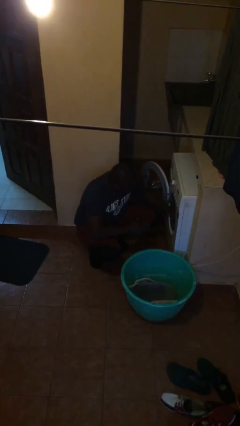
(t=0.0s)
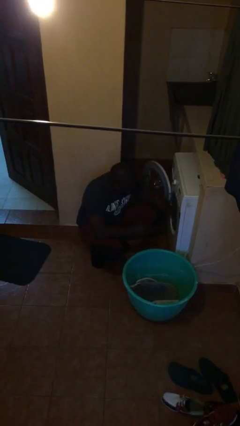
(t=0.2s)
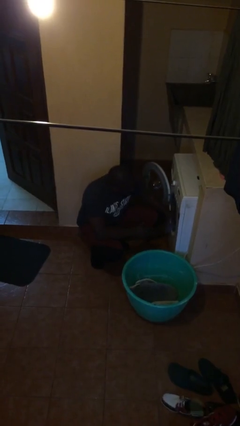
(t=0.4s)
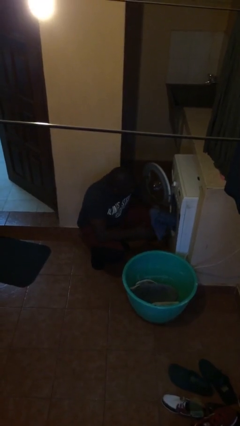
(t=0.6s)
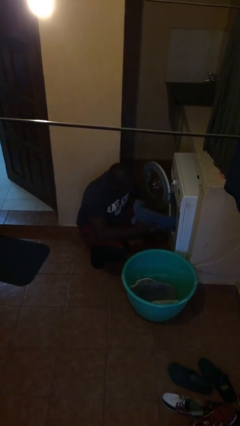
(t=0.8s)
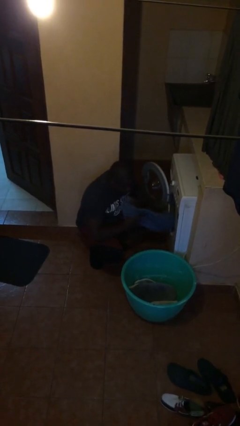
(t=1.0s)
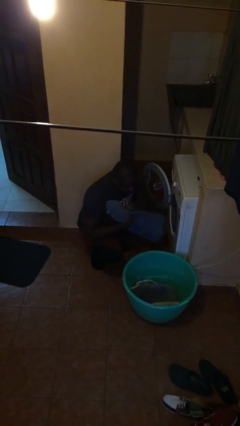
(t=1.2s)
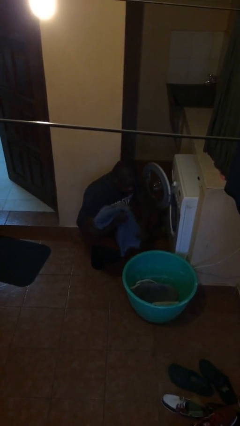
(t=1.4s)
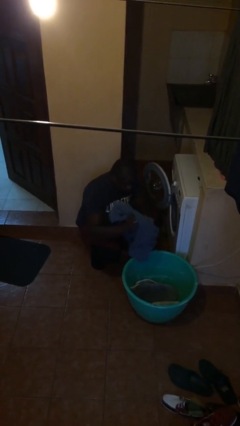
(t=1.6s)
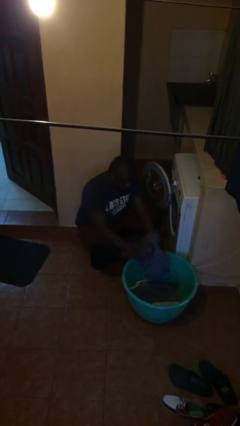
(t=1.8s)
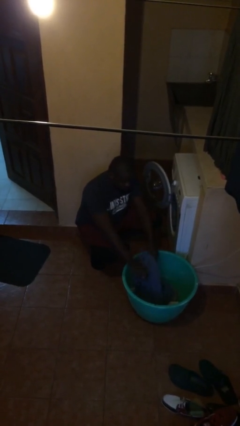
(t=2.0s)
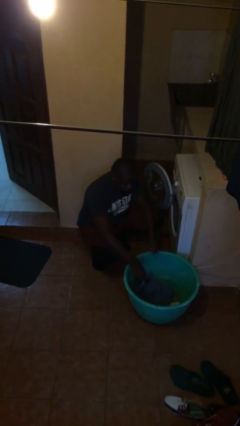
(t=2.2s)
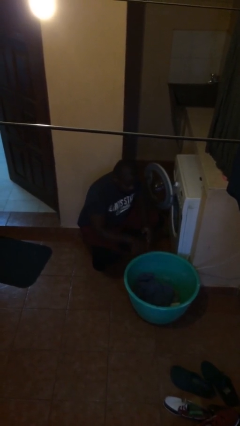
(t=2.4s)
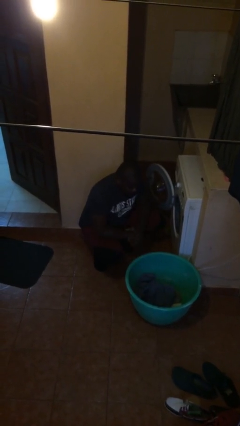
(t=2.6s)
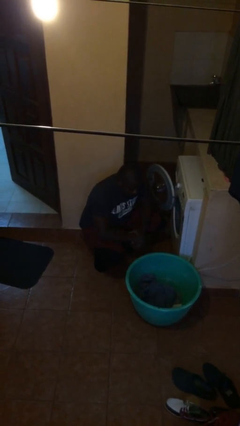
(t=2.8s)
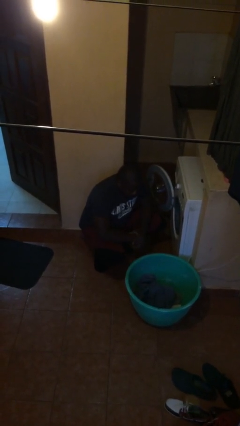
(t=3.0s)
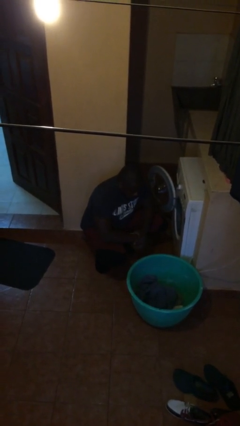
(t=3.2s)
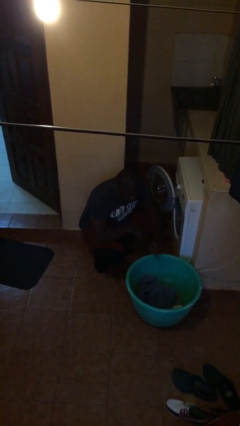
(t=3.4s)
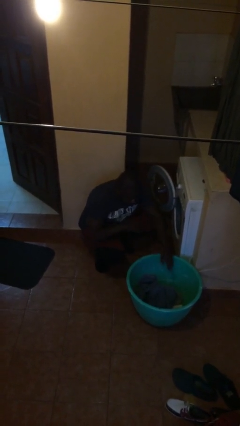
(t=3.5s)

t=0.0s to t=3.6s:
person unloads clotheswasher

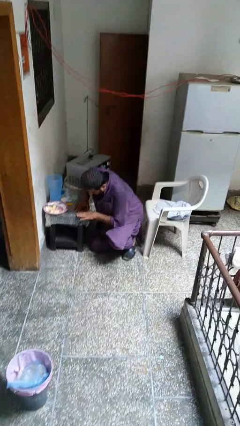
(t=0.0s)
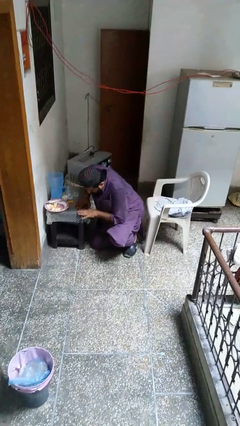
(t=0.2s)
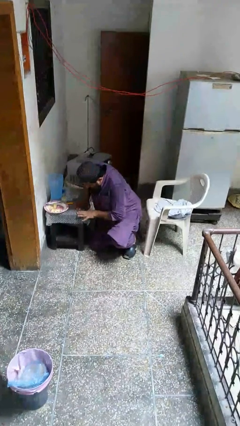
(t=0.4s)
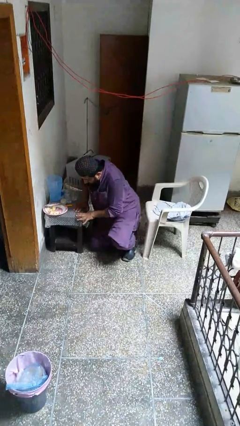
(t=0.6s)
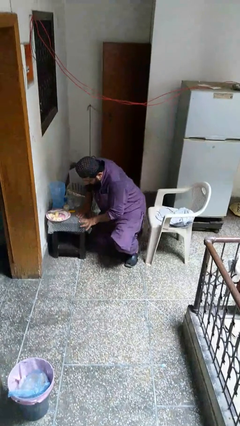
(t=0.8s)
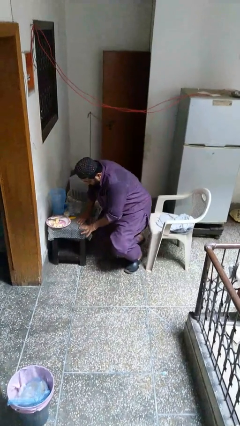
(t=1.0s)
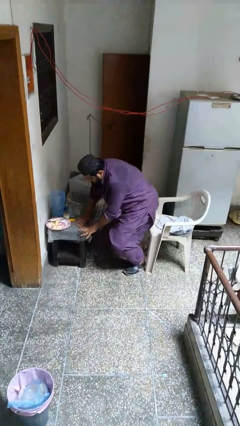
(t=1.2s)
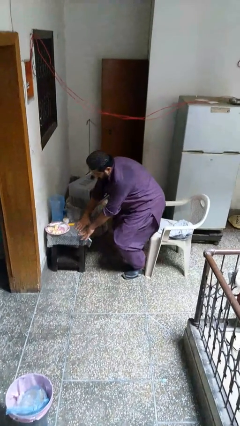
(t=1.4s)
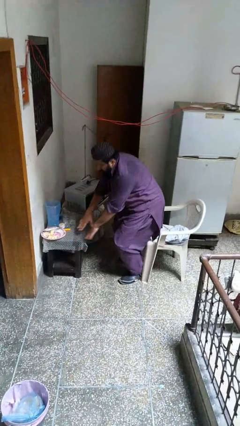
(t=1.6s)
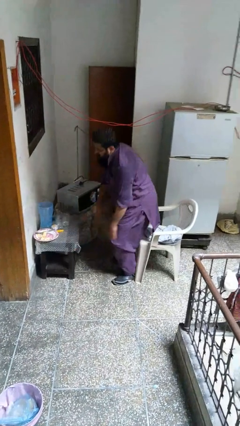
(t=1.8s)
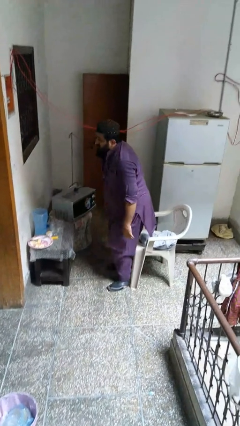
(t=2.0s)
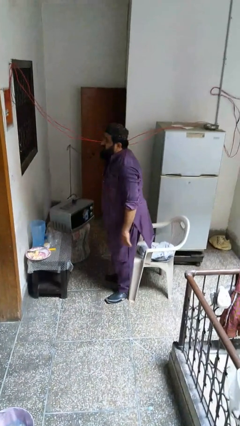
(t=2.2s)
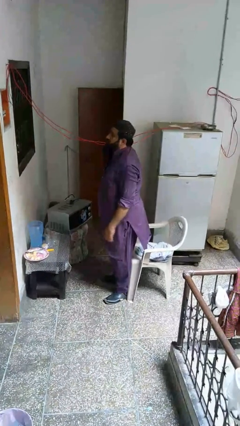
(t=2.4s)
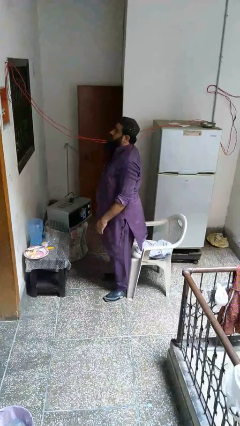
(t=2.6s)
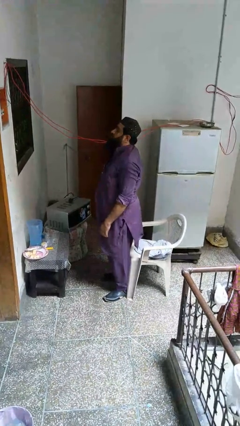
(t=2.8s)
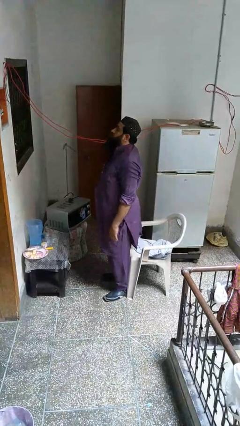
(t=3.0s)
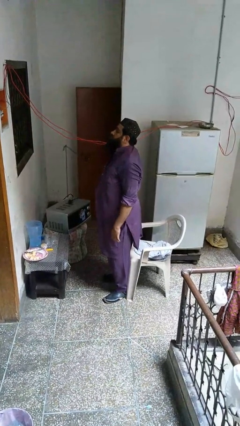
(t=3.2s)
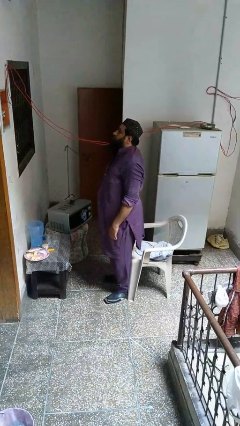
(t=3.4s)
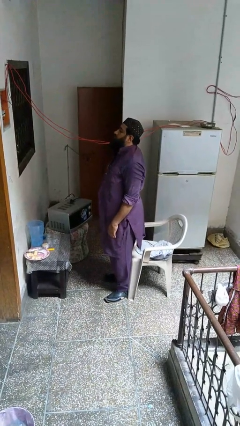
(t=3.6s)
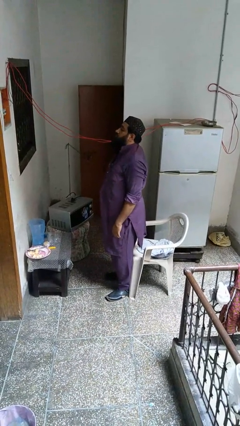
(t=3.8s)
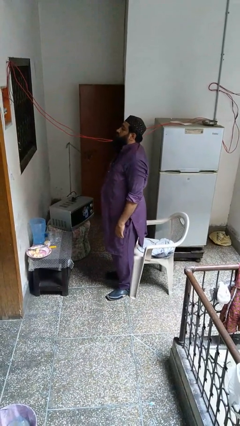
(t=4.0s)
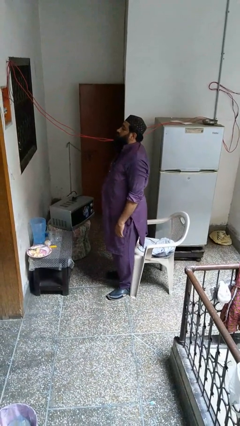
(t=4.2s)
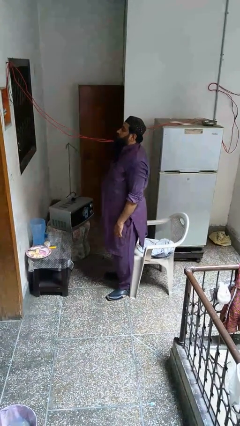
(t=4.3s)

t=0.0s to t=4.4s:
person stands up from floor

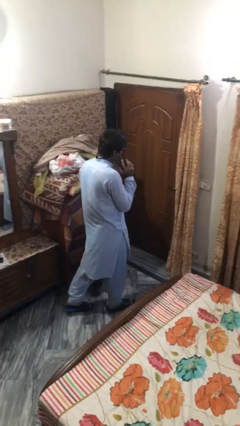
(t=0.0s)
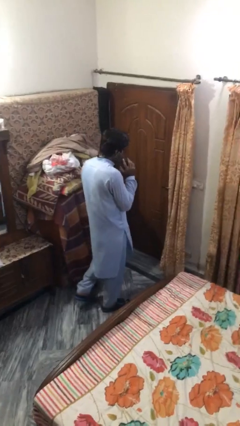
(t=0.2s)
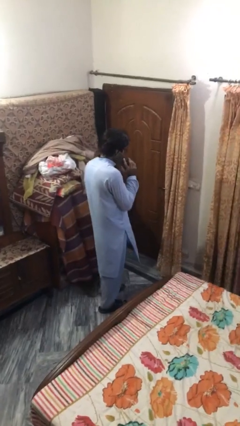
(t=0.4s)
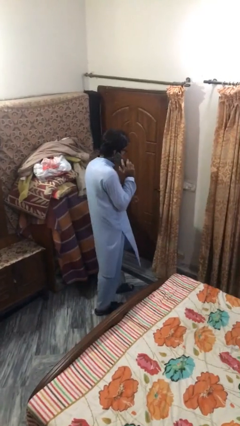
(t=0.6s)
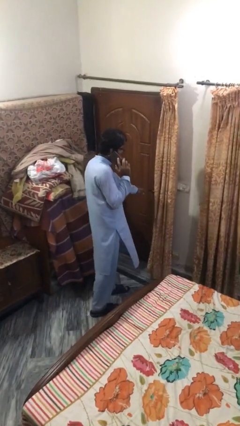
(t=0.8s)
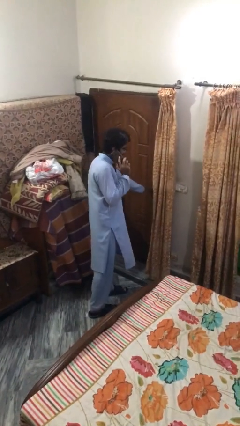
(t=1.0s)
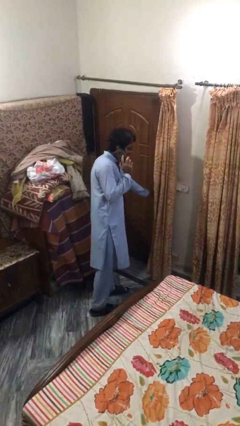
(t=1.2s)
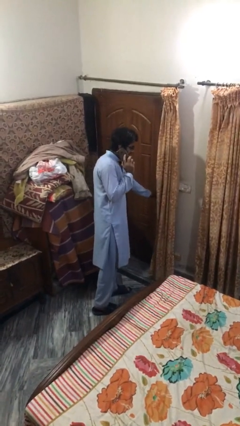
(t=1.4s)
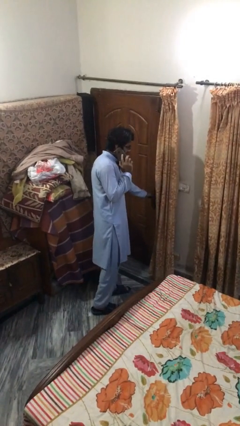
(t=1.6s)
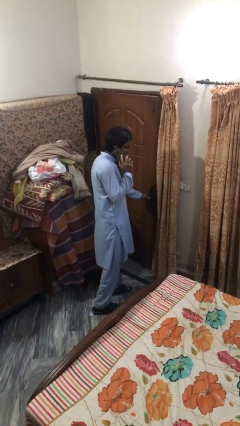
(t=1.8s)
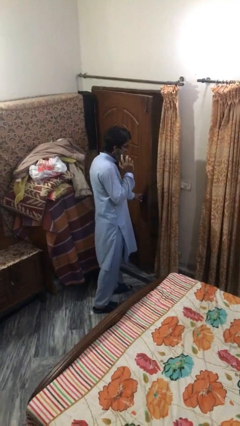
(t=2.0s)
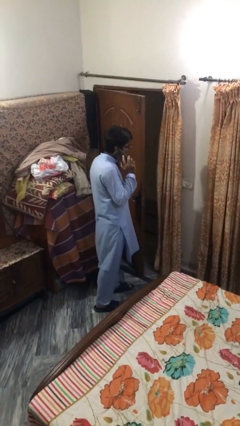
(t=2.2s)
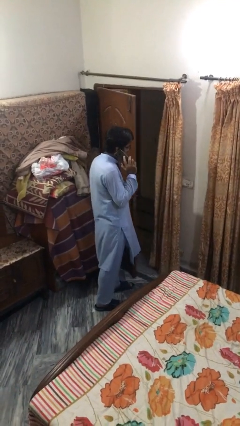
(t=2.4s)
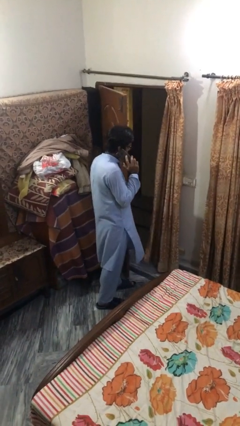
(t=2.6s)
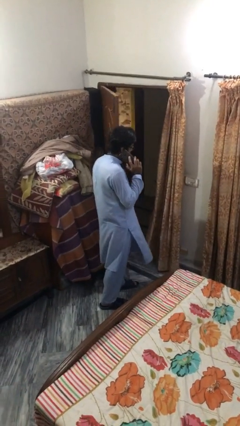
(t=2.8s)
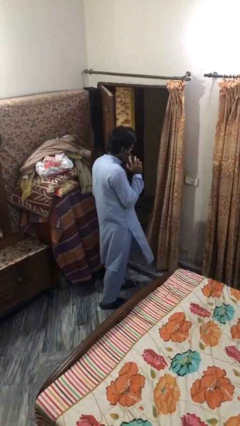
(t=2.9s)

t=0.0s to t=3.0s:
person opens facility door

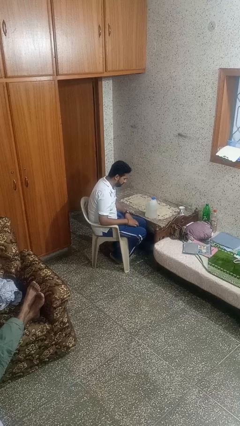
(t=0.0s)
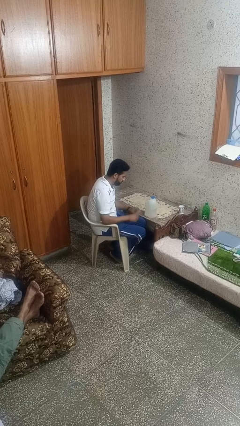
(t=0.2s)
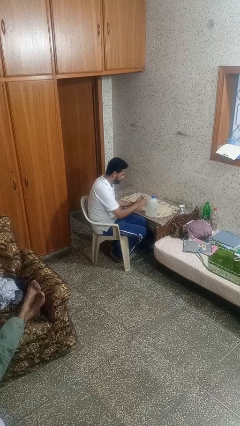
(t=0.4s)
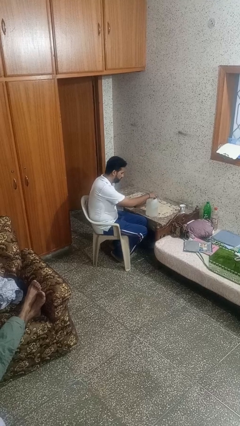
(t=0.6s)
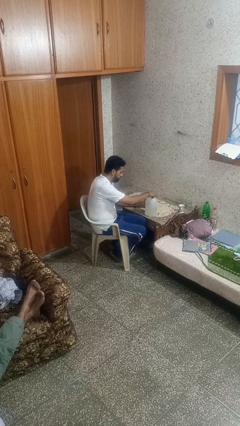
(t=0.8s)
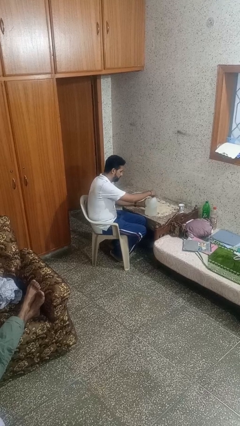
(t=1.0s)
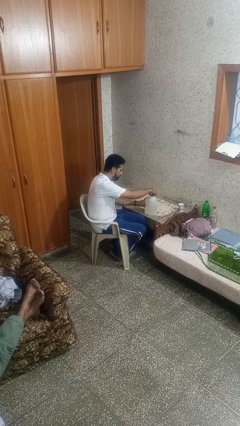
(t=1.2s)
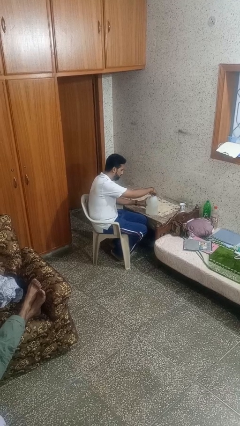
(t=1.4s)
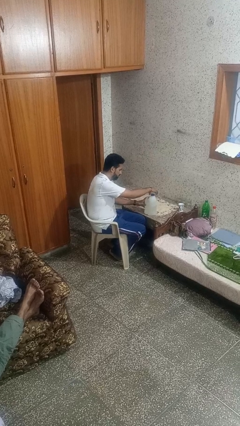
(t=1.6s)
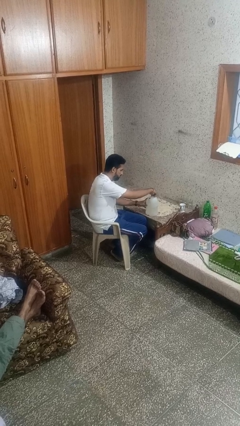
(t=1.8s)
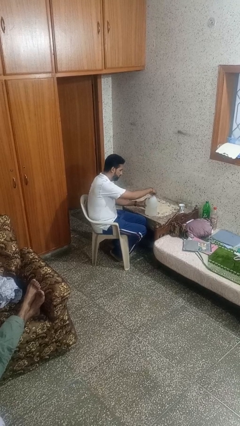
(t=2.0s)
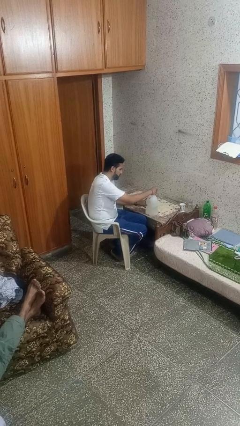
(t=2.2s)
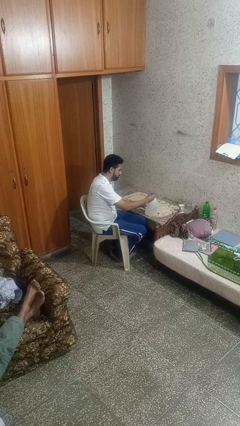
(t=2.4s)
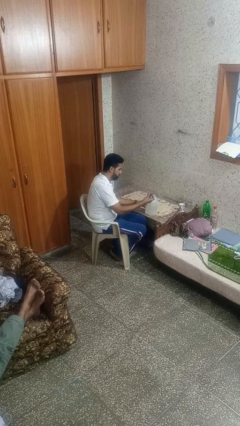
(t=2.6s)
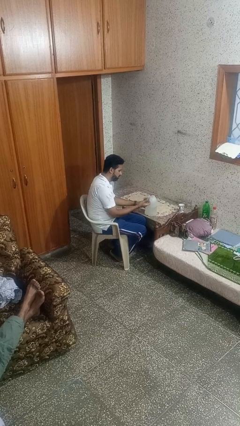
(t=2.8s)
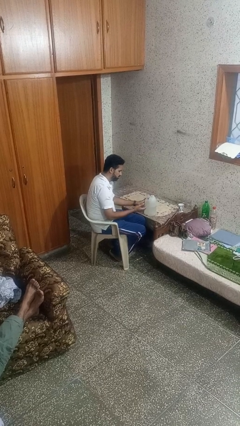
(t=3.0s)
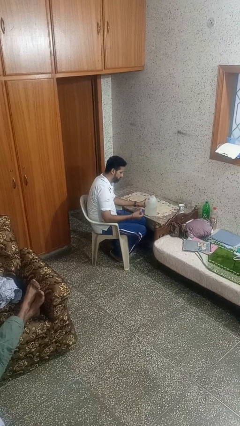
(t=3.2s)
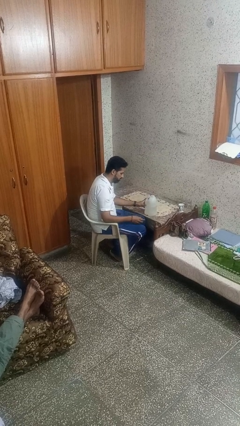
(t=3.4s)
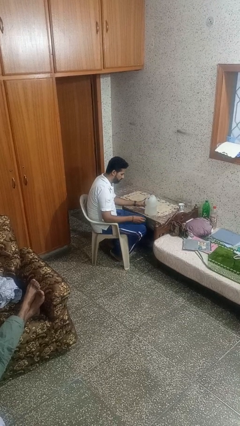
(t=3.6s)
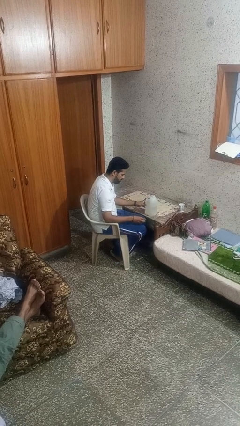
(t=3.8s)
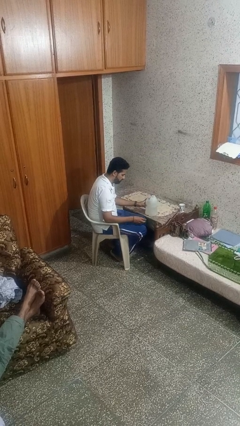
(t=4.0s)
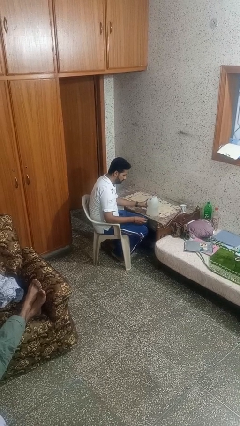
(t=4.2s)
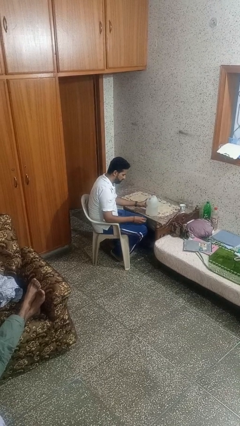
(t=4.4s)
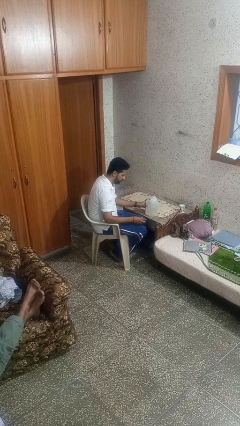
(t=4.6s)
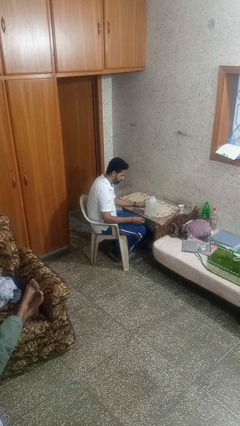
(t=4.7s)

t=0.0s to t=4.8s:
person unscrews lid from bottle

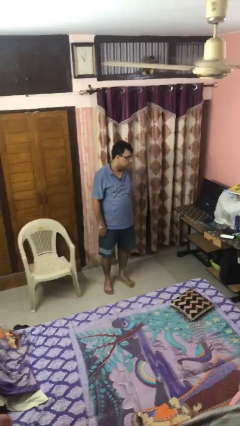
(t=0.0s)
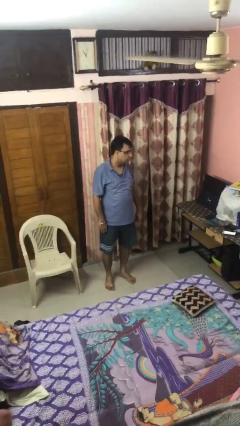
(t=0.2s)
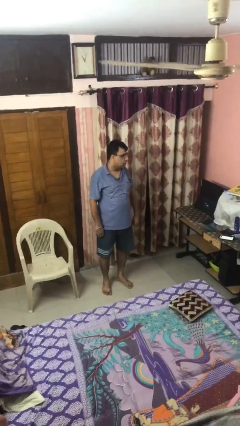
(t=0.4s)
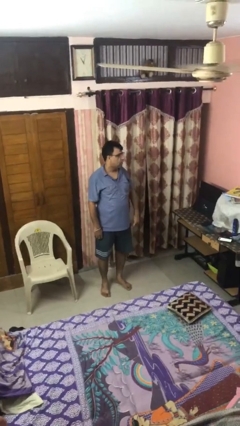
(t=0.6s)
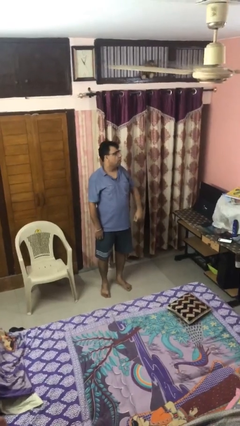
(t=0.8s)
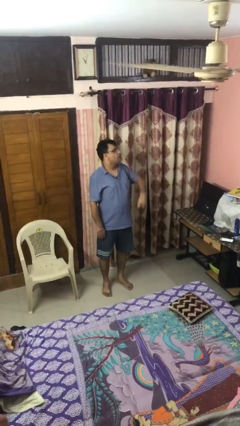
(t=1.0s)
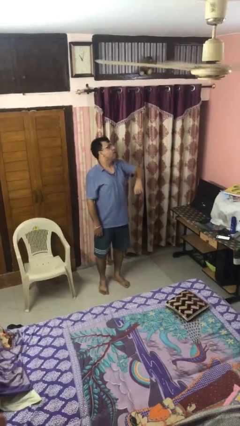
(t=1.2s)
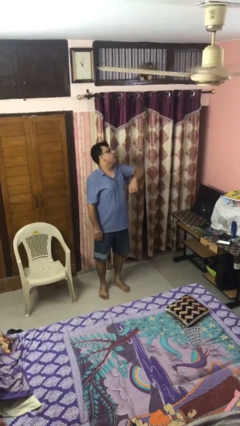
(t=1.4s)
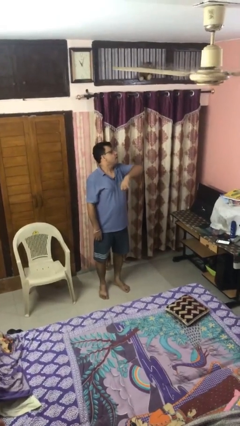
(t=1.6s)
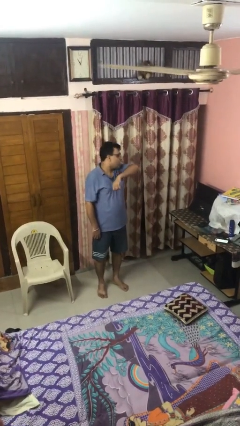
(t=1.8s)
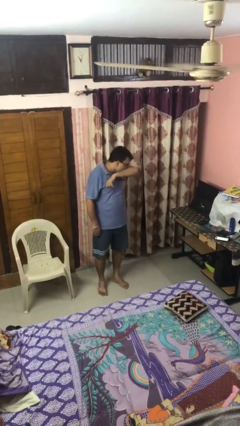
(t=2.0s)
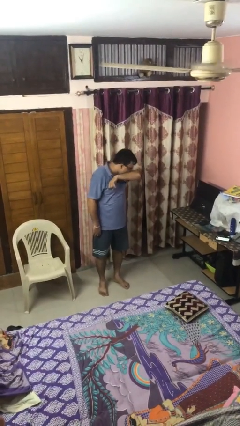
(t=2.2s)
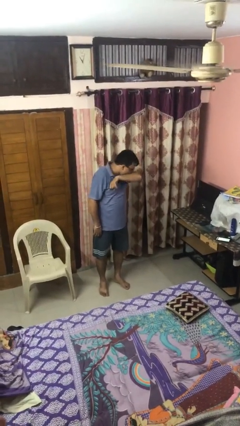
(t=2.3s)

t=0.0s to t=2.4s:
person sneezes into arm
